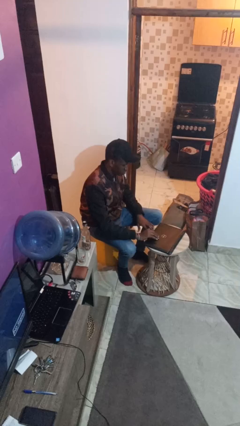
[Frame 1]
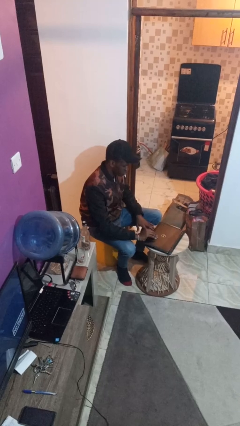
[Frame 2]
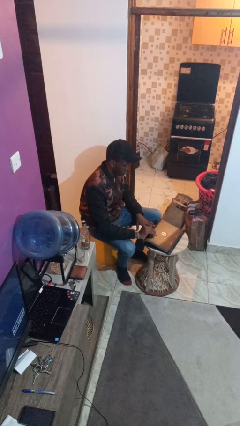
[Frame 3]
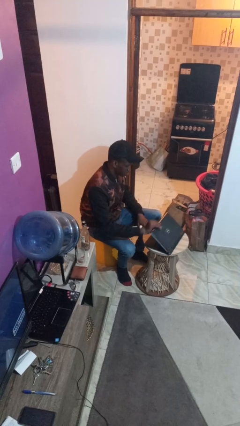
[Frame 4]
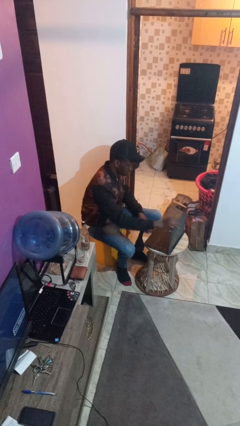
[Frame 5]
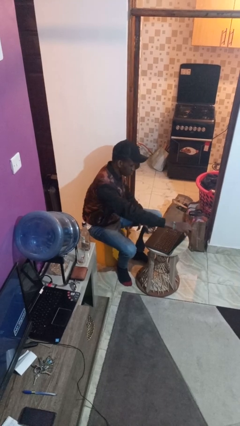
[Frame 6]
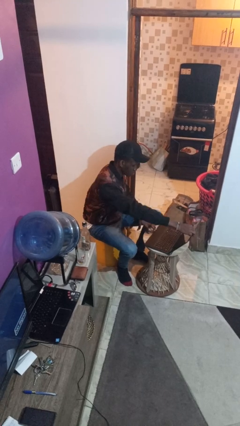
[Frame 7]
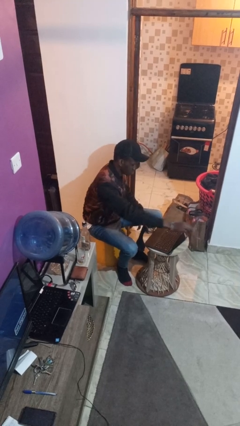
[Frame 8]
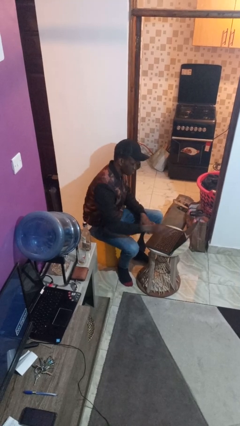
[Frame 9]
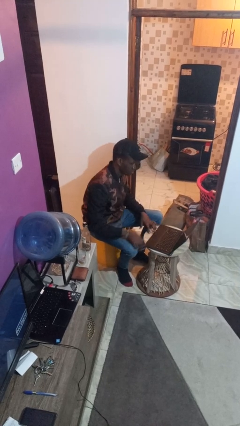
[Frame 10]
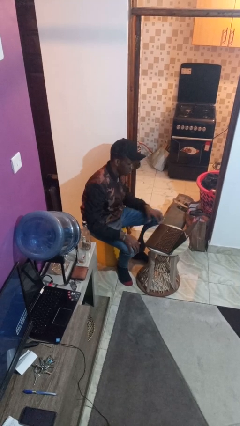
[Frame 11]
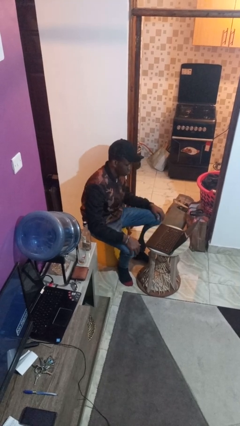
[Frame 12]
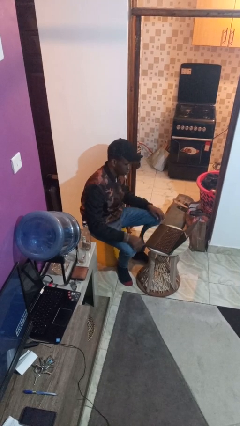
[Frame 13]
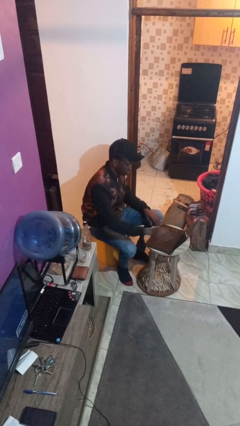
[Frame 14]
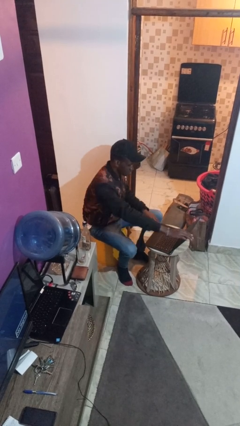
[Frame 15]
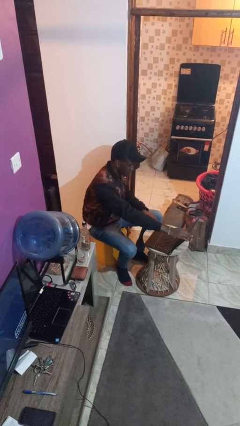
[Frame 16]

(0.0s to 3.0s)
person opens laptop

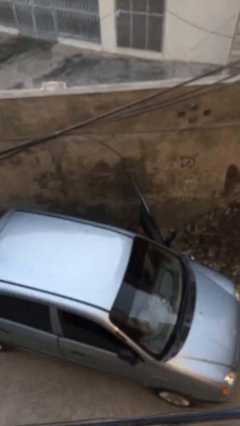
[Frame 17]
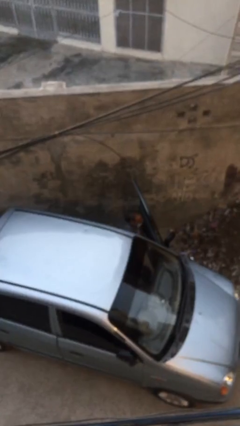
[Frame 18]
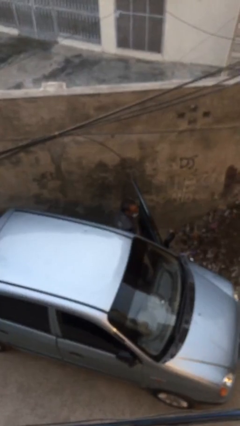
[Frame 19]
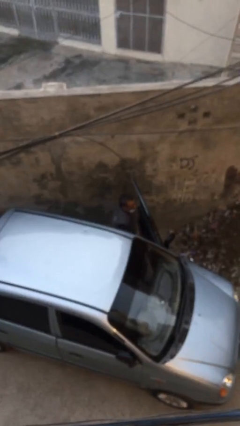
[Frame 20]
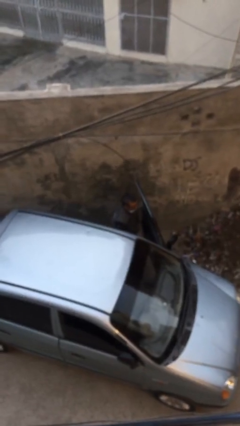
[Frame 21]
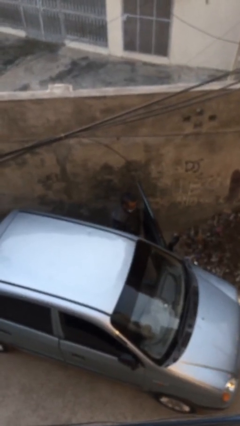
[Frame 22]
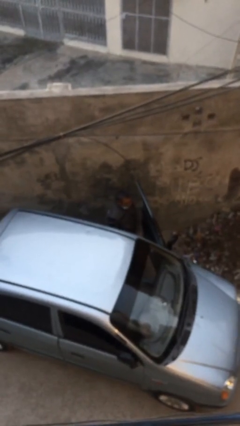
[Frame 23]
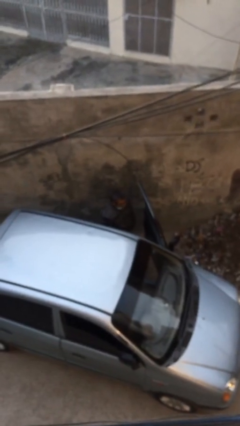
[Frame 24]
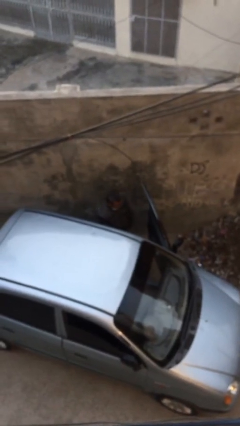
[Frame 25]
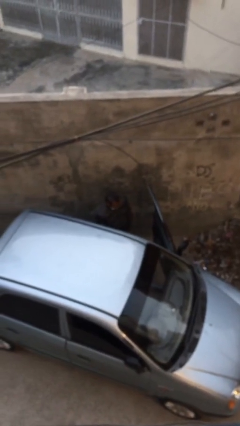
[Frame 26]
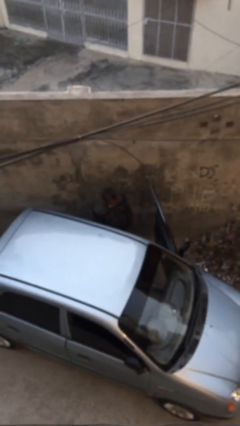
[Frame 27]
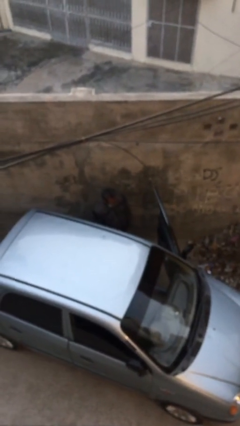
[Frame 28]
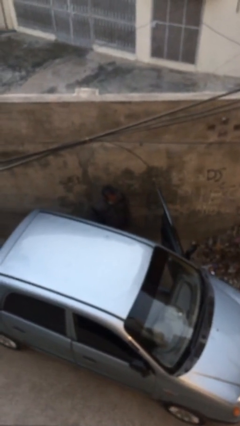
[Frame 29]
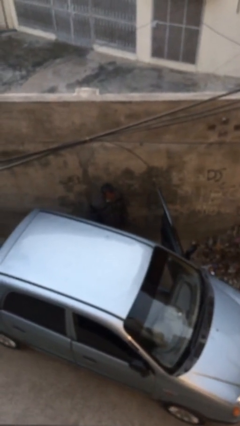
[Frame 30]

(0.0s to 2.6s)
person exits car

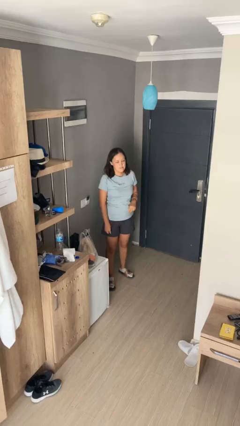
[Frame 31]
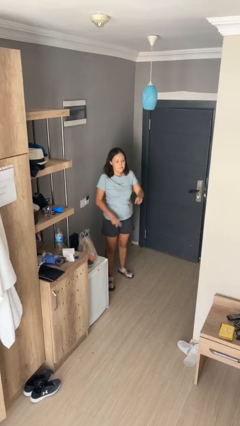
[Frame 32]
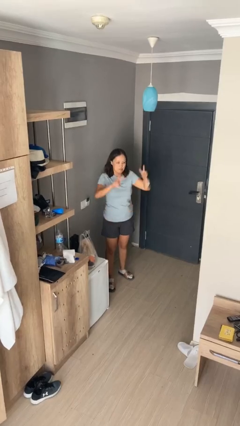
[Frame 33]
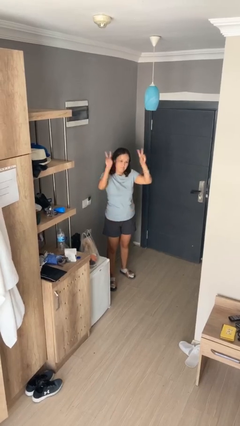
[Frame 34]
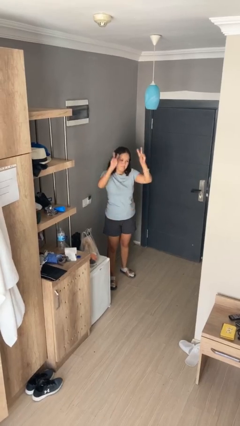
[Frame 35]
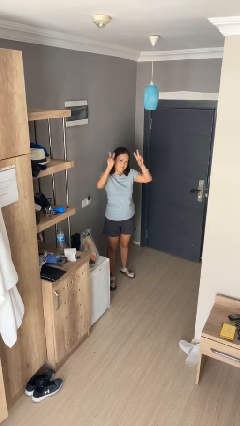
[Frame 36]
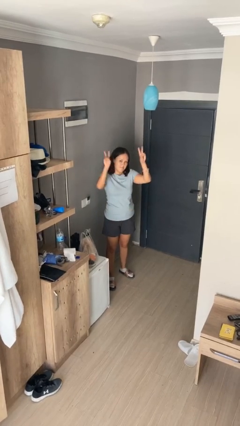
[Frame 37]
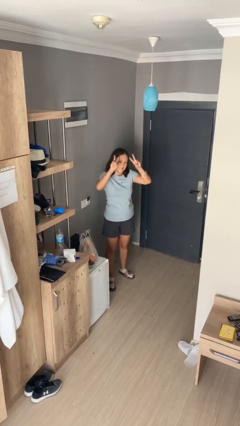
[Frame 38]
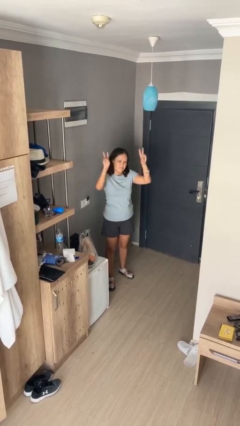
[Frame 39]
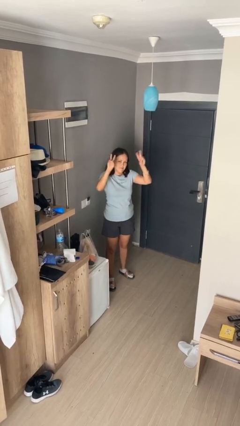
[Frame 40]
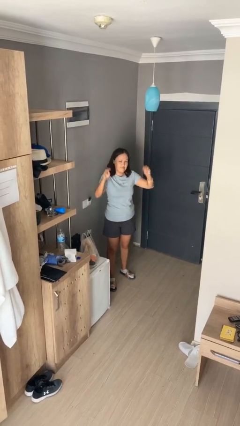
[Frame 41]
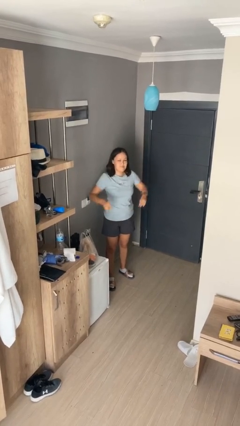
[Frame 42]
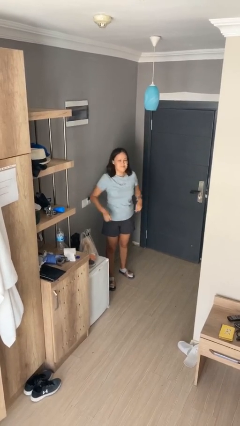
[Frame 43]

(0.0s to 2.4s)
person gestures peace

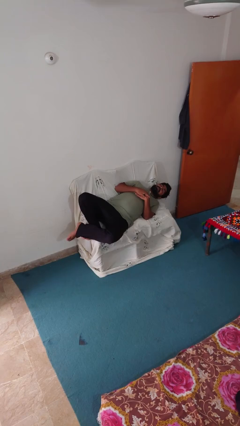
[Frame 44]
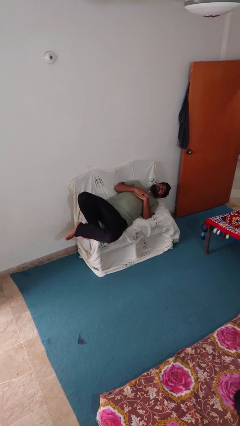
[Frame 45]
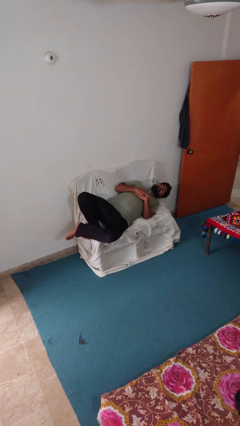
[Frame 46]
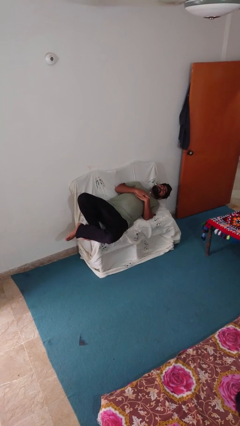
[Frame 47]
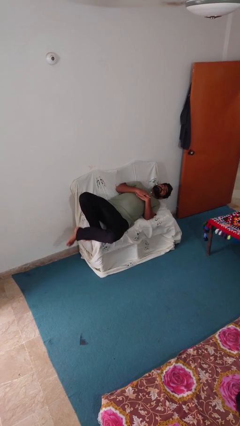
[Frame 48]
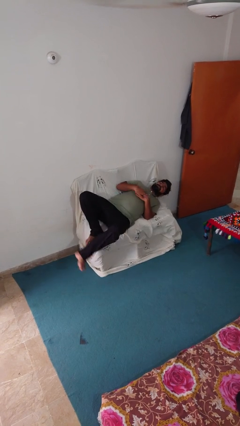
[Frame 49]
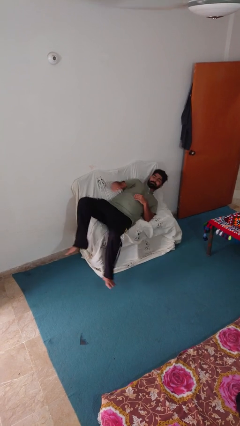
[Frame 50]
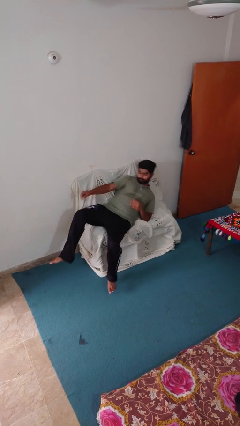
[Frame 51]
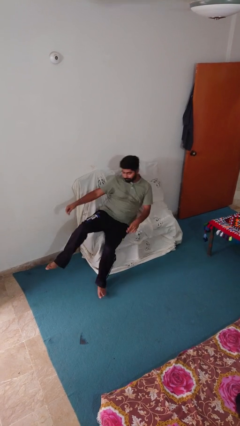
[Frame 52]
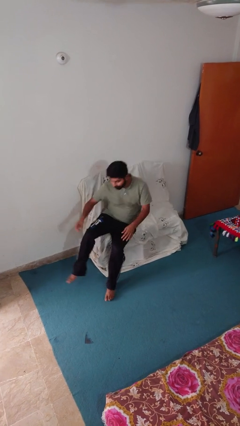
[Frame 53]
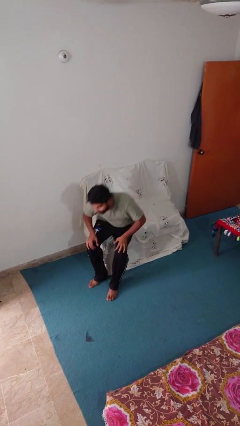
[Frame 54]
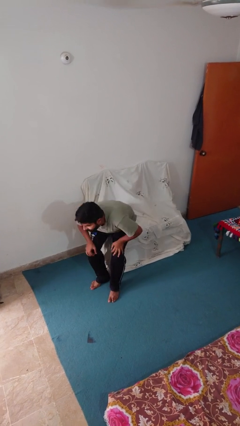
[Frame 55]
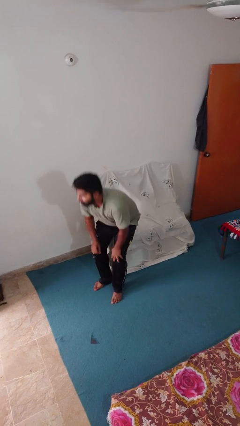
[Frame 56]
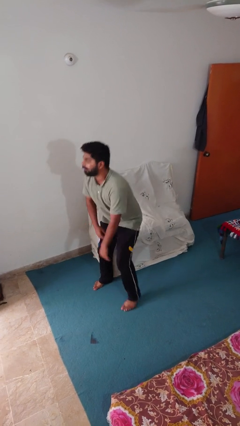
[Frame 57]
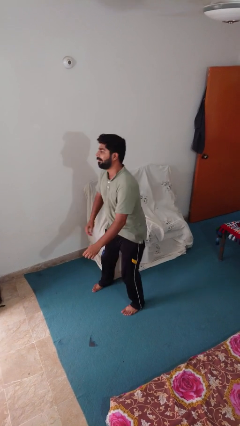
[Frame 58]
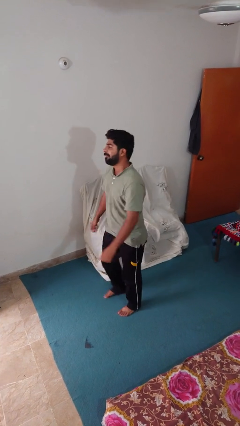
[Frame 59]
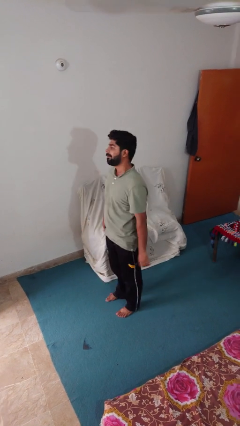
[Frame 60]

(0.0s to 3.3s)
person stands up

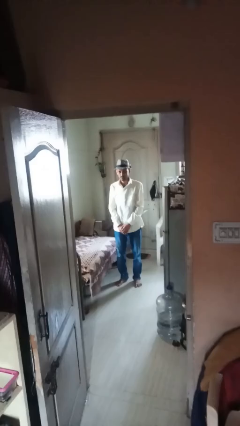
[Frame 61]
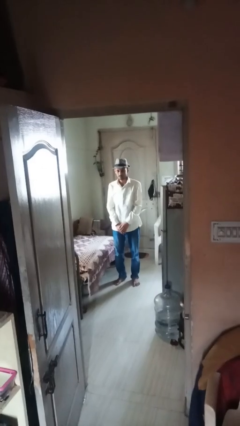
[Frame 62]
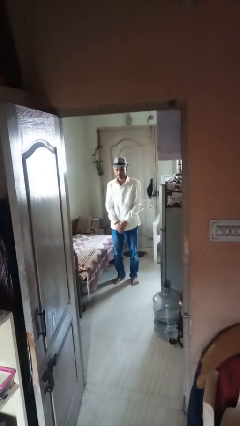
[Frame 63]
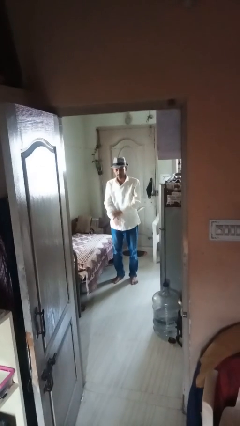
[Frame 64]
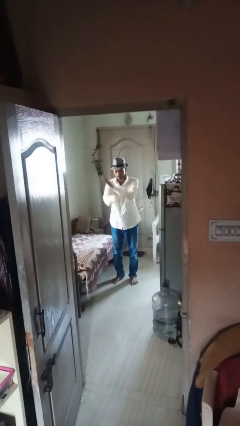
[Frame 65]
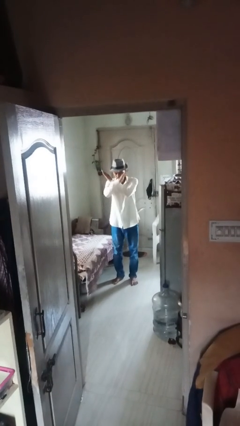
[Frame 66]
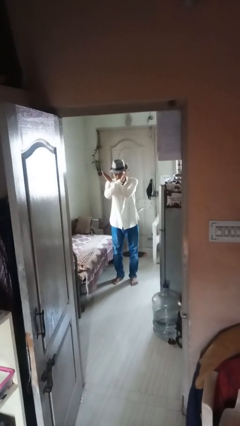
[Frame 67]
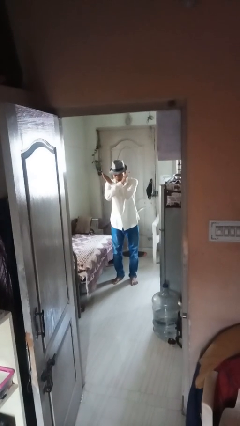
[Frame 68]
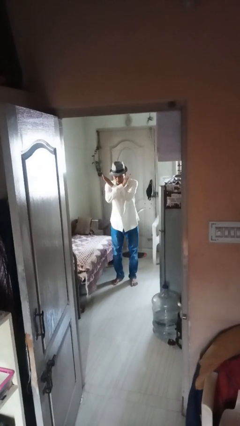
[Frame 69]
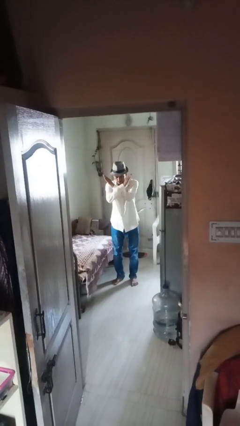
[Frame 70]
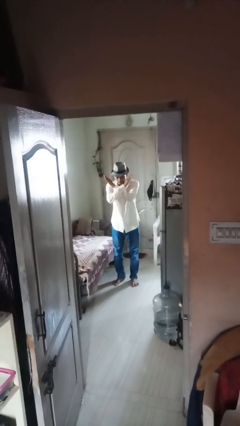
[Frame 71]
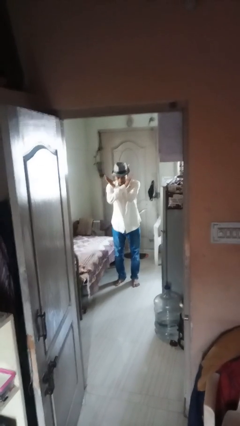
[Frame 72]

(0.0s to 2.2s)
person gestures arms x

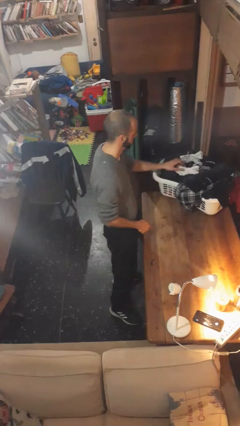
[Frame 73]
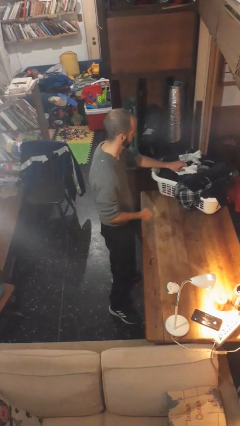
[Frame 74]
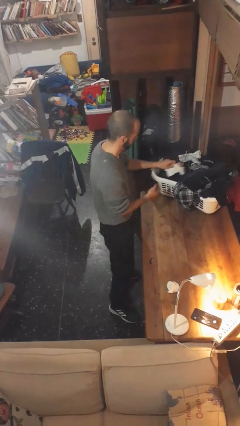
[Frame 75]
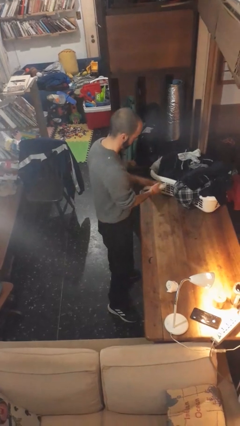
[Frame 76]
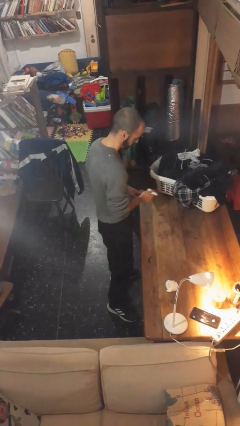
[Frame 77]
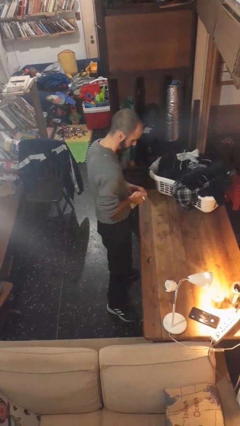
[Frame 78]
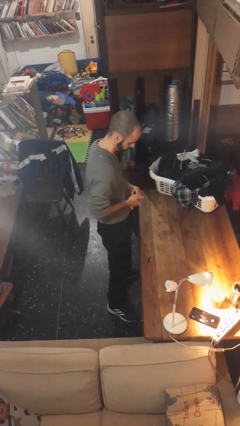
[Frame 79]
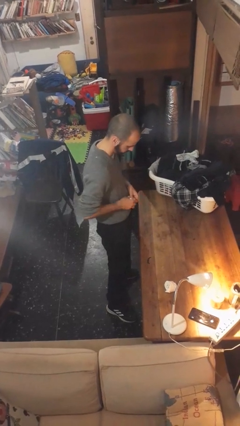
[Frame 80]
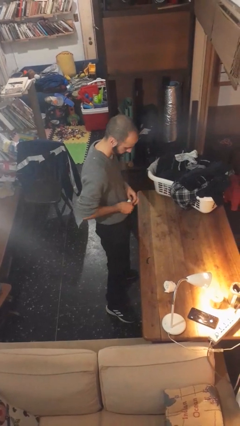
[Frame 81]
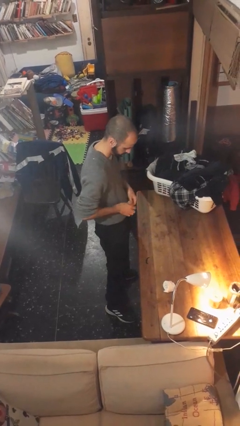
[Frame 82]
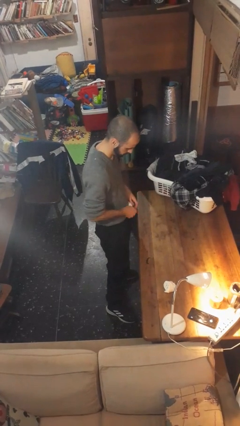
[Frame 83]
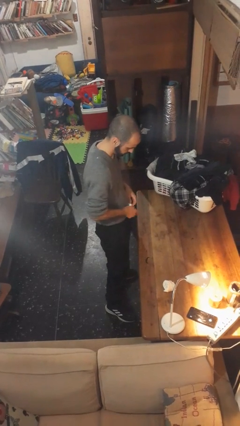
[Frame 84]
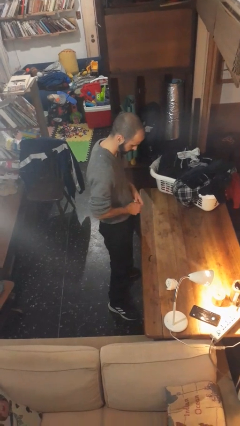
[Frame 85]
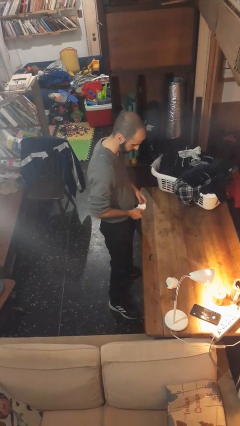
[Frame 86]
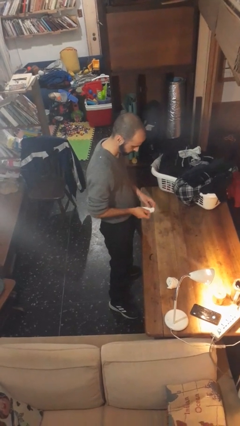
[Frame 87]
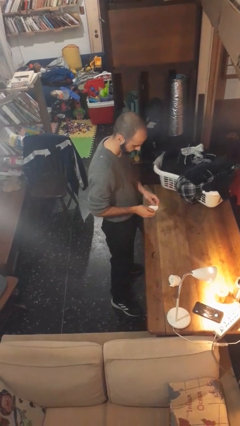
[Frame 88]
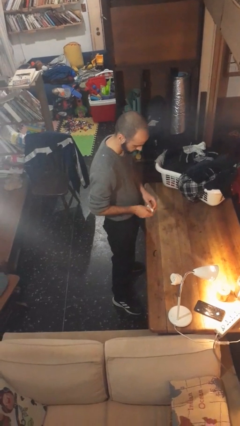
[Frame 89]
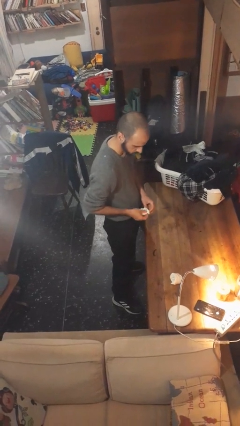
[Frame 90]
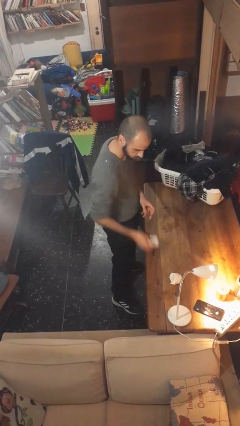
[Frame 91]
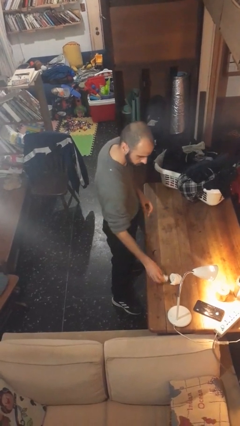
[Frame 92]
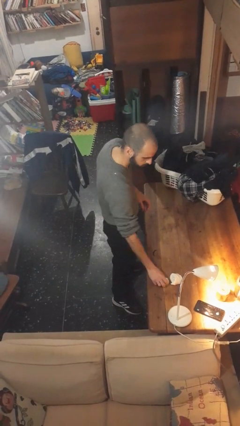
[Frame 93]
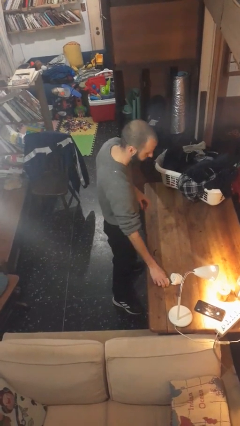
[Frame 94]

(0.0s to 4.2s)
person folds socks
